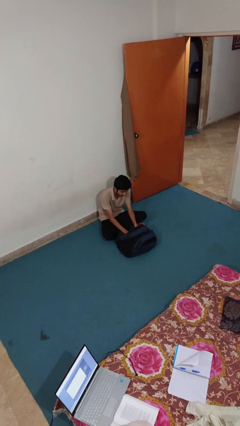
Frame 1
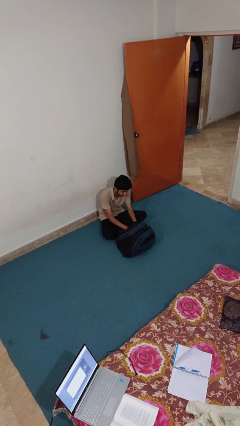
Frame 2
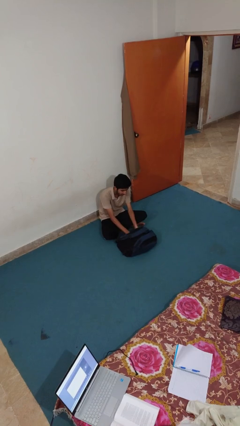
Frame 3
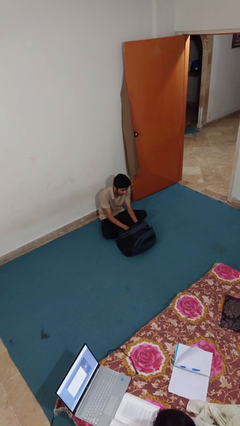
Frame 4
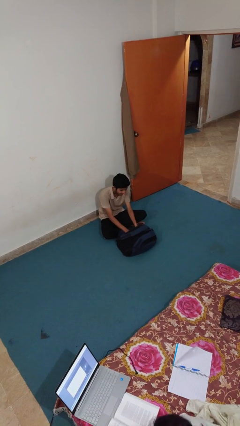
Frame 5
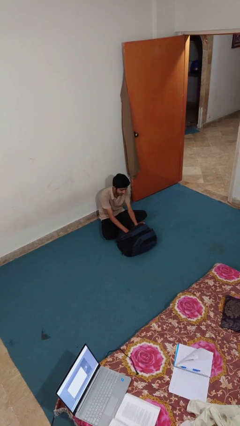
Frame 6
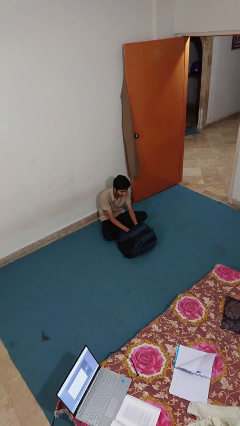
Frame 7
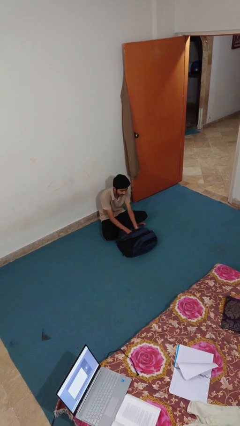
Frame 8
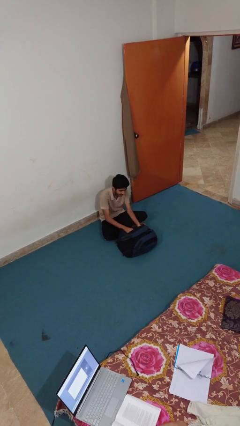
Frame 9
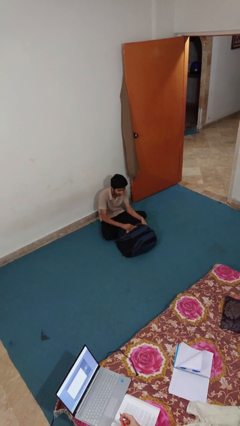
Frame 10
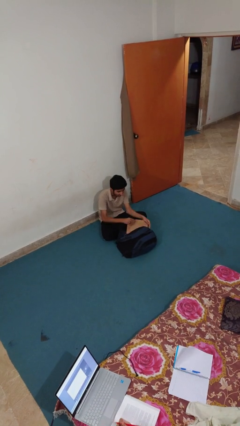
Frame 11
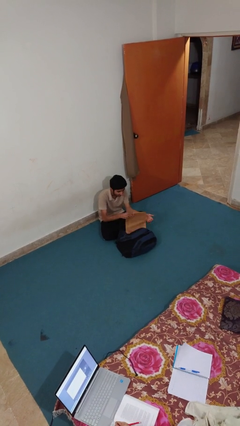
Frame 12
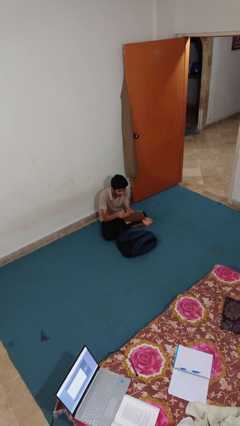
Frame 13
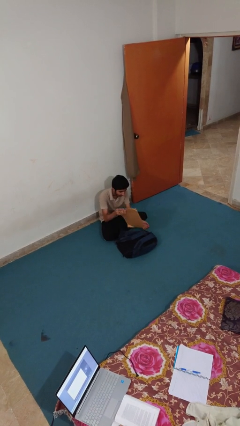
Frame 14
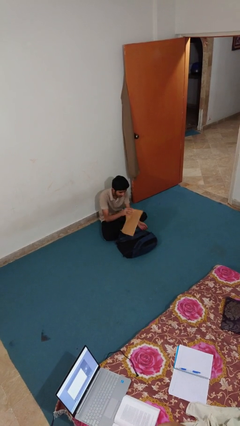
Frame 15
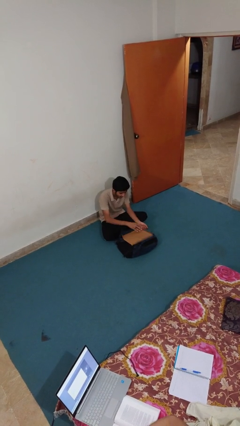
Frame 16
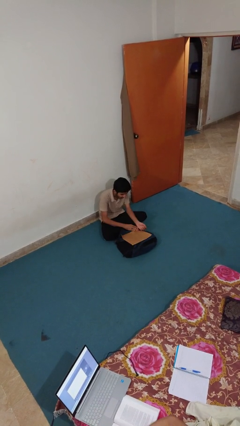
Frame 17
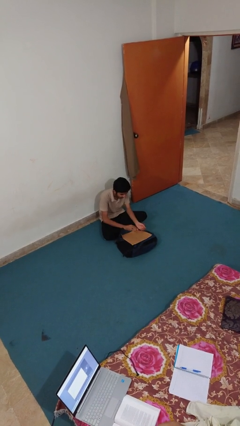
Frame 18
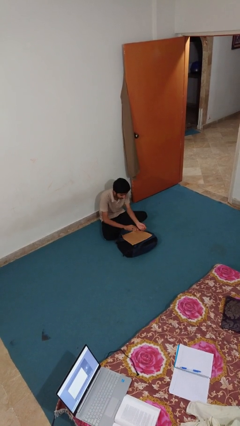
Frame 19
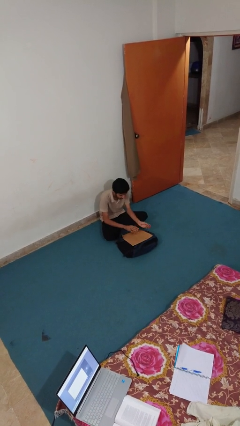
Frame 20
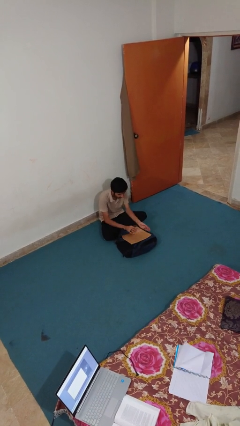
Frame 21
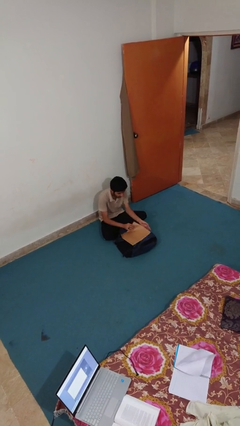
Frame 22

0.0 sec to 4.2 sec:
person sweeps floor

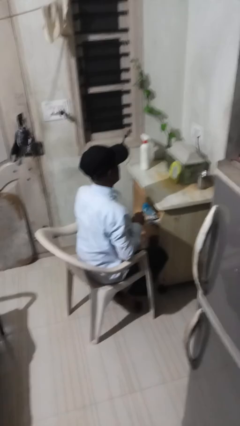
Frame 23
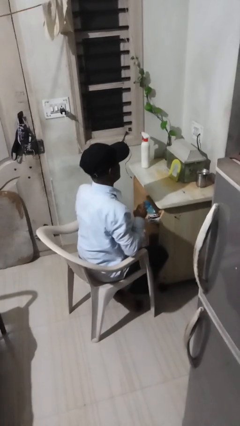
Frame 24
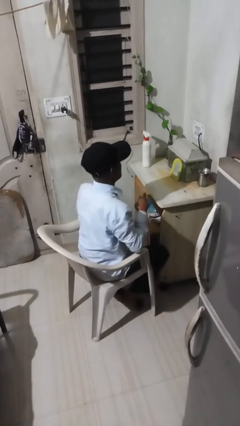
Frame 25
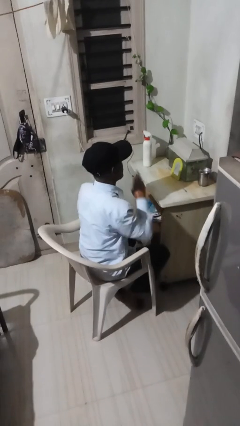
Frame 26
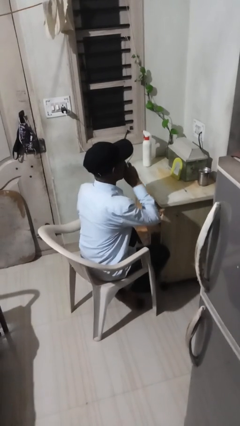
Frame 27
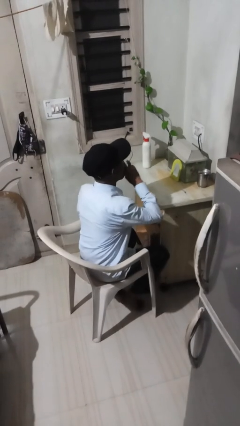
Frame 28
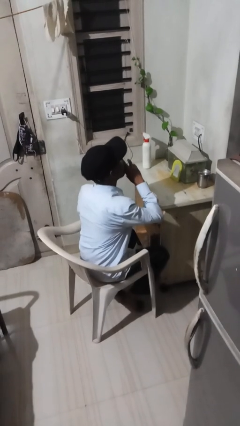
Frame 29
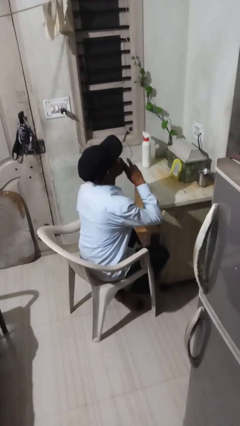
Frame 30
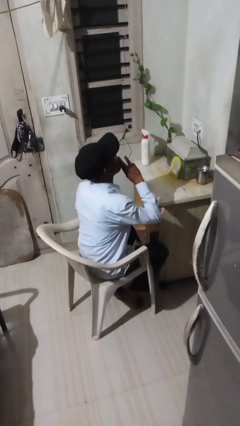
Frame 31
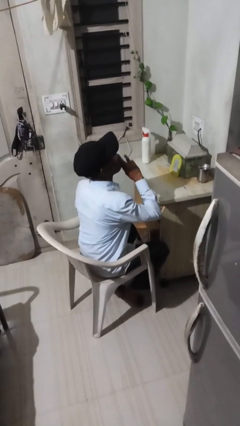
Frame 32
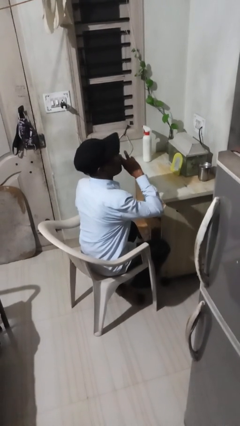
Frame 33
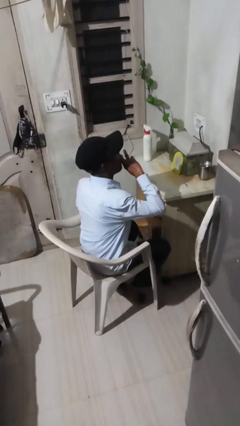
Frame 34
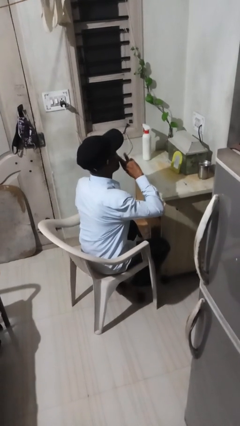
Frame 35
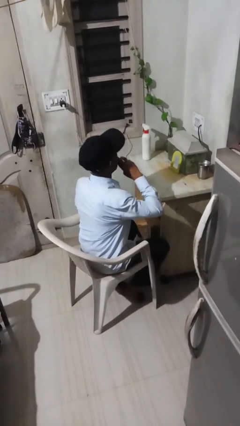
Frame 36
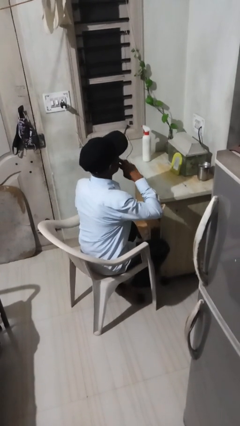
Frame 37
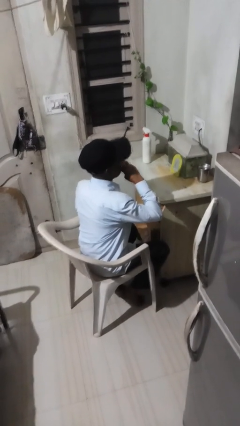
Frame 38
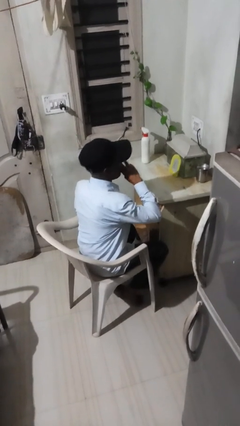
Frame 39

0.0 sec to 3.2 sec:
person licks fingers

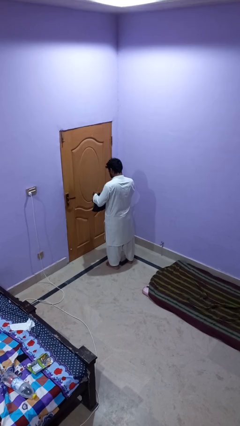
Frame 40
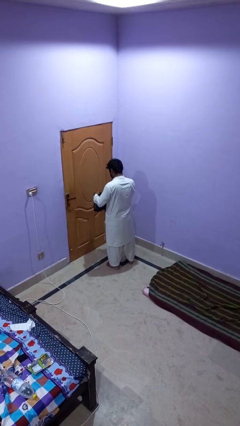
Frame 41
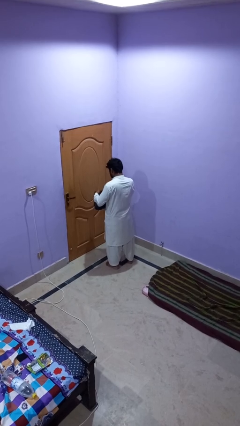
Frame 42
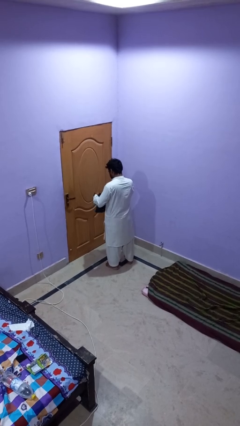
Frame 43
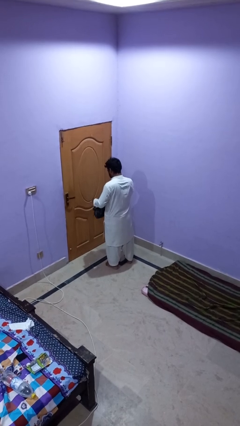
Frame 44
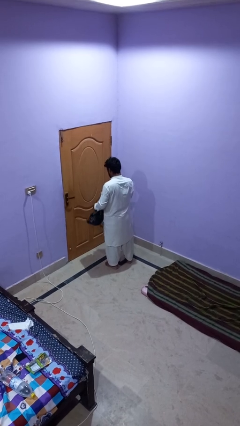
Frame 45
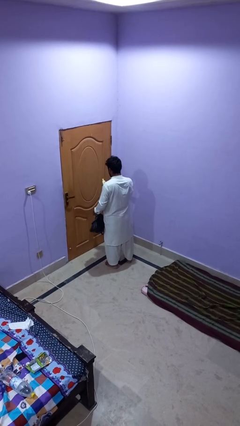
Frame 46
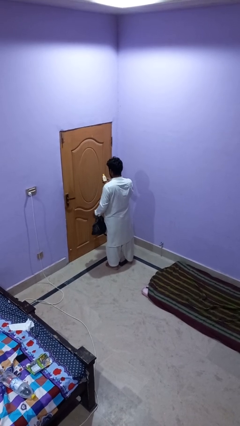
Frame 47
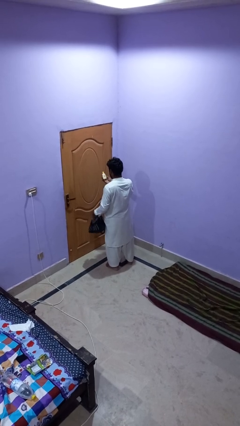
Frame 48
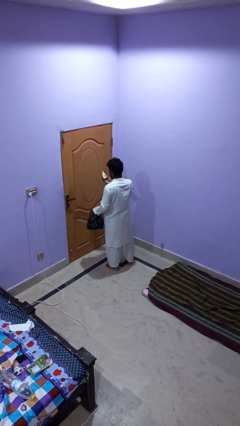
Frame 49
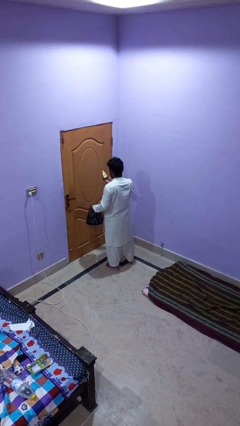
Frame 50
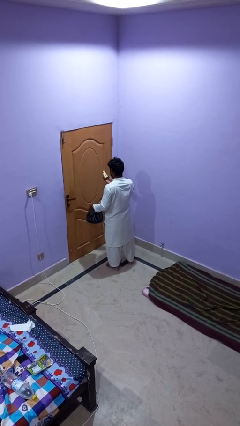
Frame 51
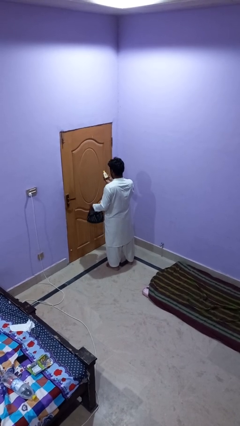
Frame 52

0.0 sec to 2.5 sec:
person takes object from purse

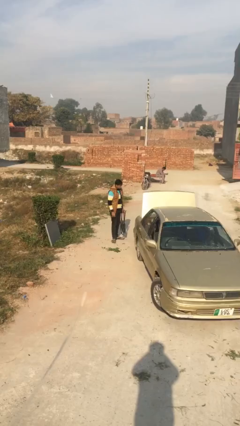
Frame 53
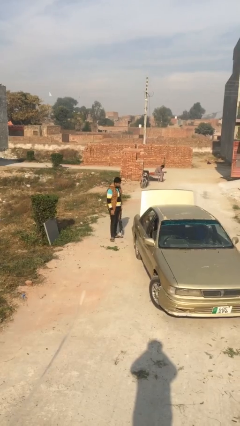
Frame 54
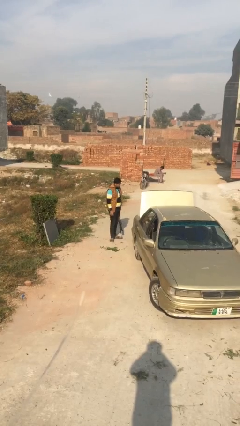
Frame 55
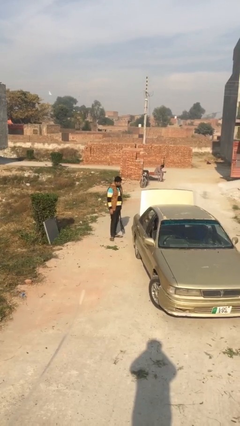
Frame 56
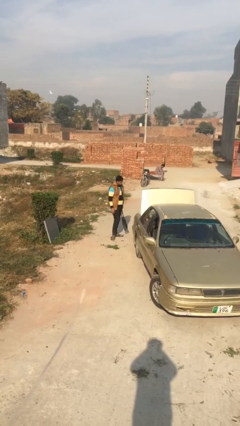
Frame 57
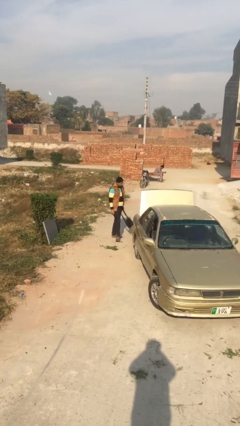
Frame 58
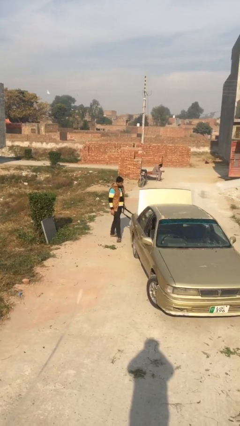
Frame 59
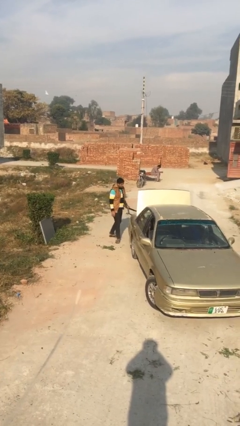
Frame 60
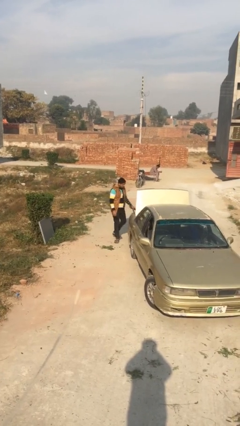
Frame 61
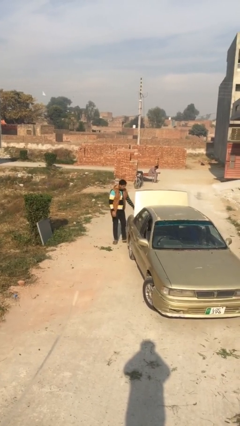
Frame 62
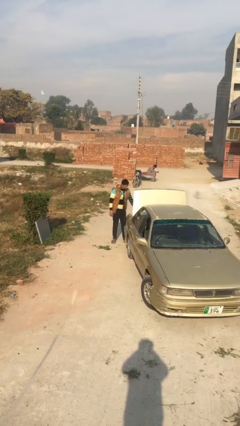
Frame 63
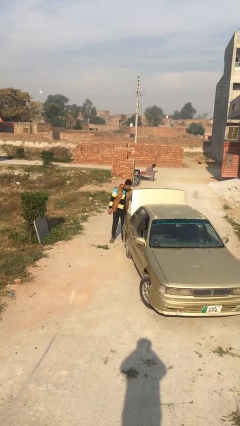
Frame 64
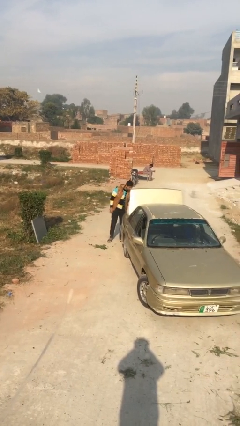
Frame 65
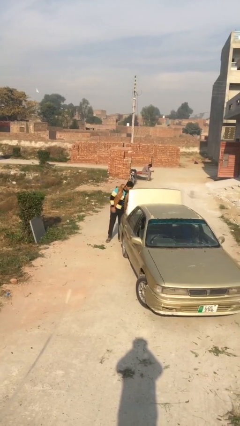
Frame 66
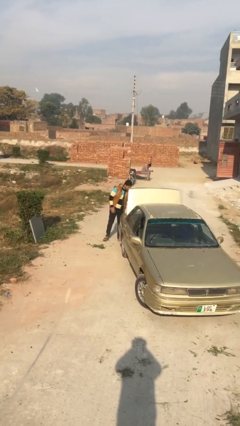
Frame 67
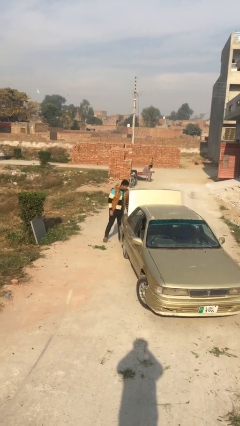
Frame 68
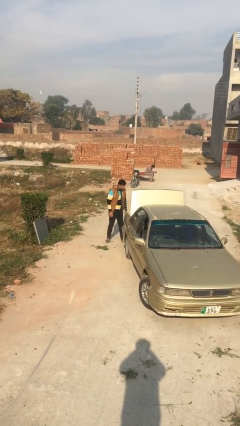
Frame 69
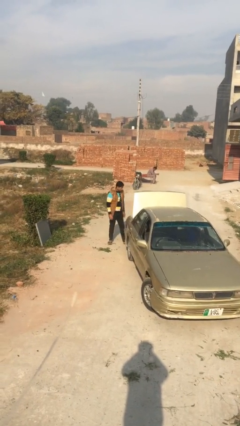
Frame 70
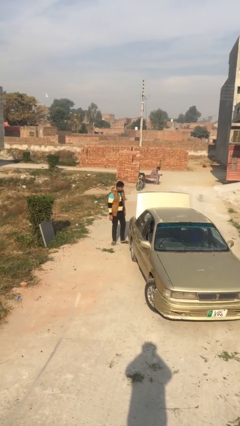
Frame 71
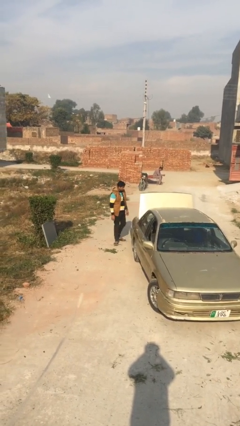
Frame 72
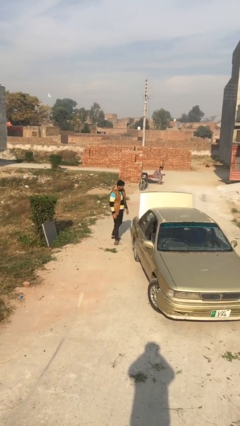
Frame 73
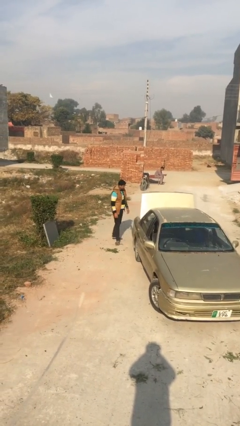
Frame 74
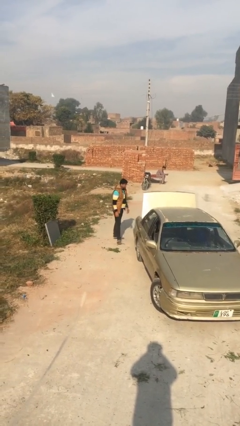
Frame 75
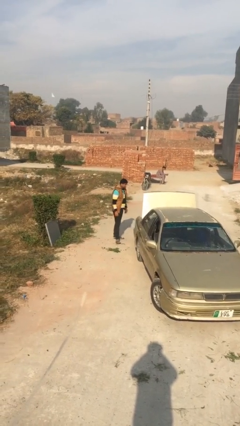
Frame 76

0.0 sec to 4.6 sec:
person loads car

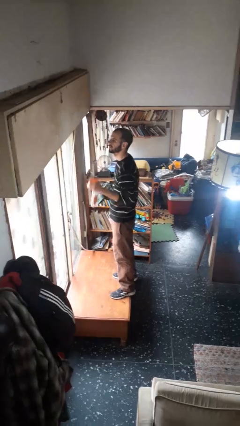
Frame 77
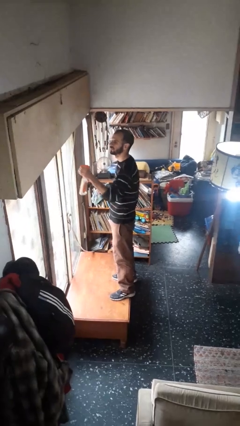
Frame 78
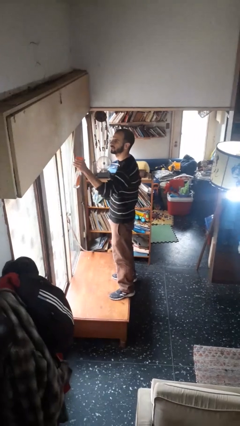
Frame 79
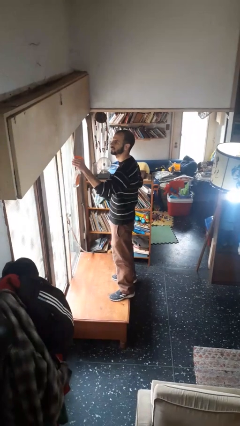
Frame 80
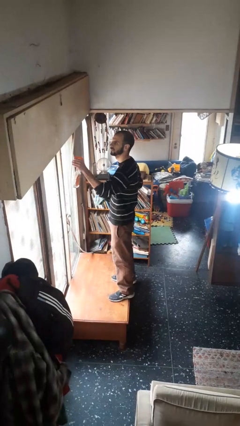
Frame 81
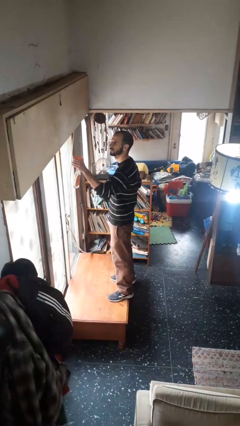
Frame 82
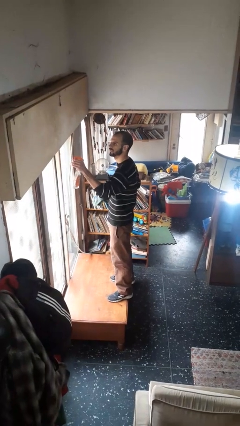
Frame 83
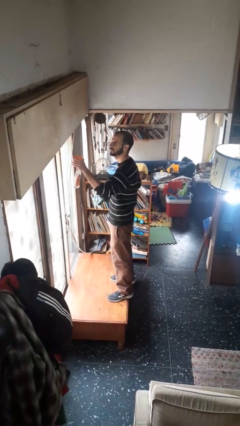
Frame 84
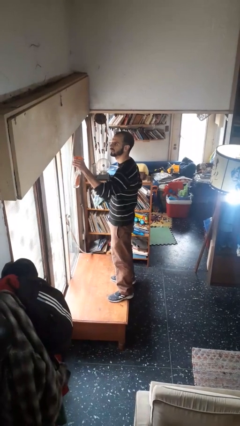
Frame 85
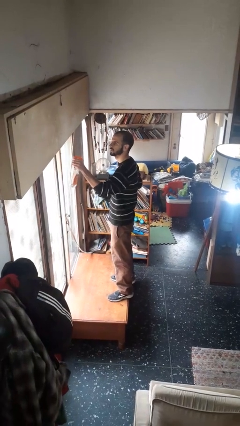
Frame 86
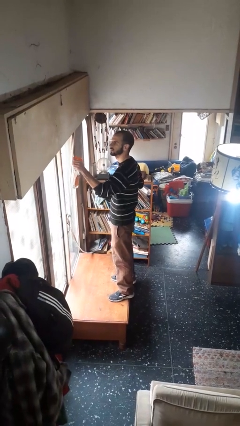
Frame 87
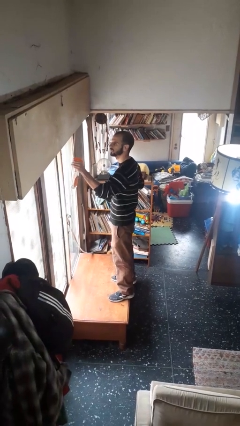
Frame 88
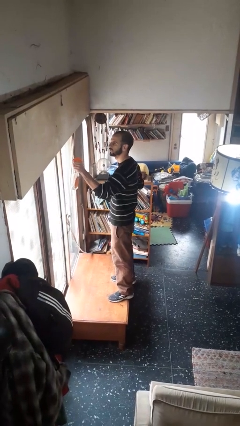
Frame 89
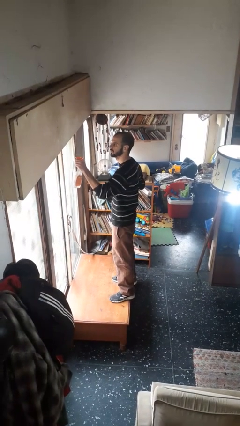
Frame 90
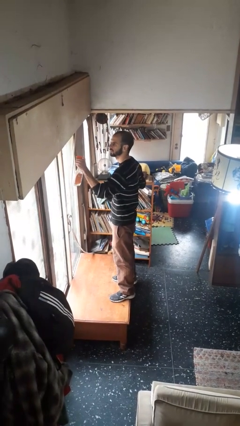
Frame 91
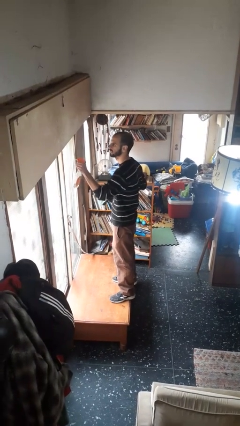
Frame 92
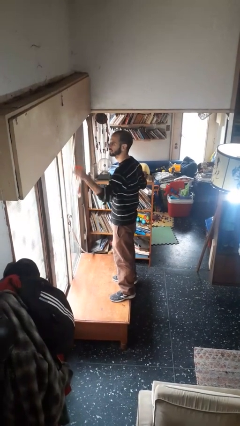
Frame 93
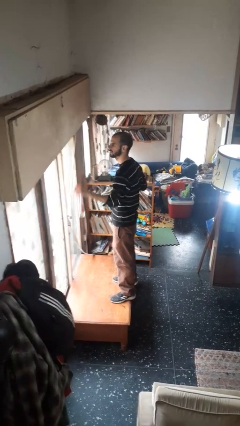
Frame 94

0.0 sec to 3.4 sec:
person sprays from bottle

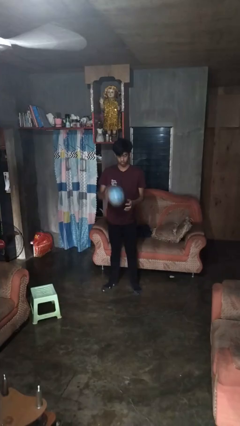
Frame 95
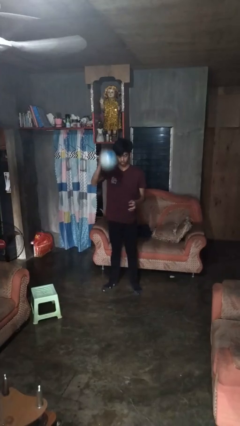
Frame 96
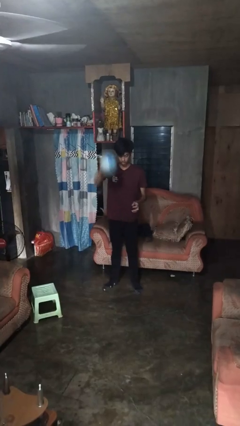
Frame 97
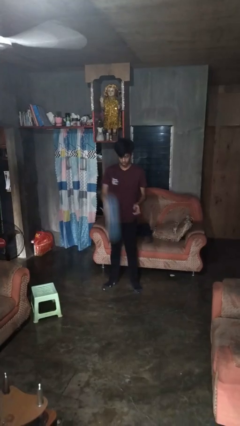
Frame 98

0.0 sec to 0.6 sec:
person bounces ball on floor
